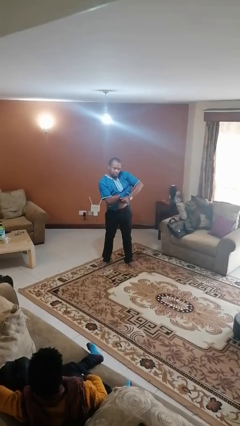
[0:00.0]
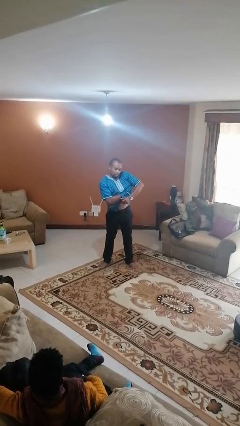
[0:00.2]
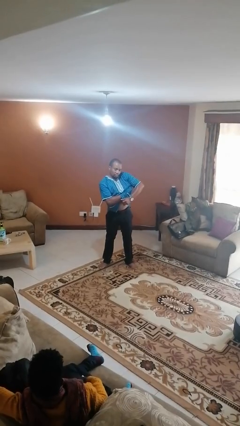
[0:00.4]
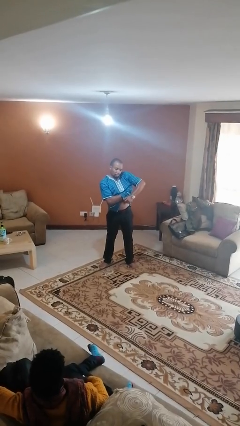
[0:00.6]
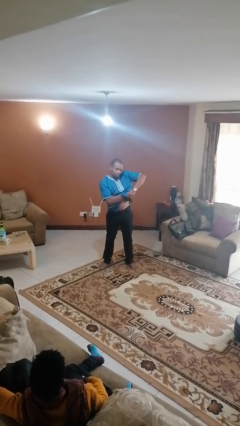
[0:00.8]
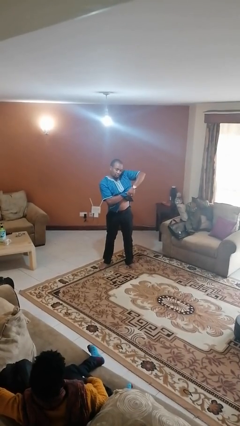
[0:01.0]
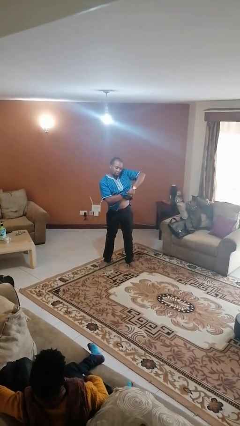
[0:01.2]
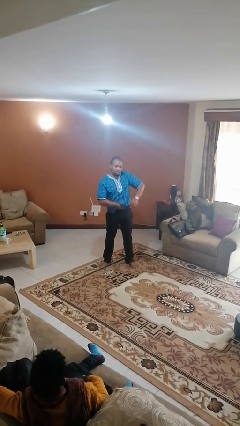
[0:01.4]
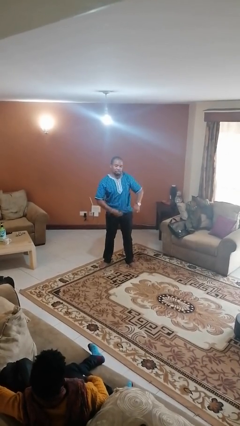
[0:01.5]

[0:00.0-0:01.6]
person applies deodorant

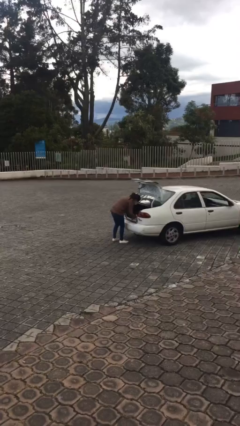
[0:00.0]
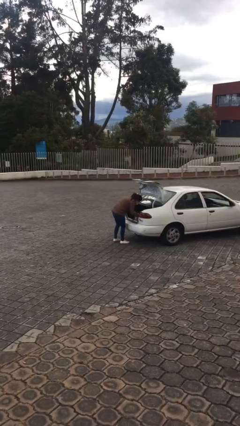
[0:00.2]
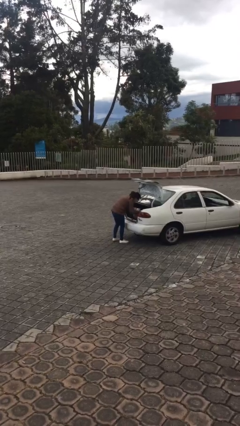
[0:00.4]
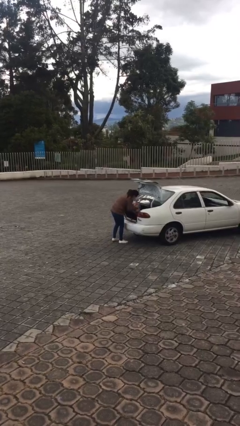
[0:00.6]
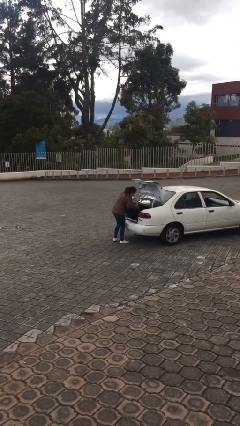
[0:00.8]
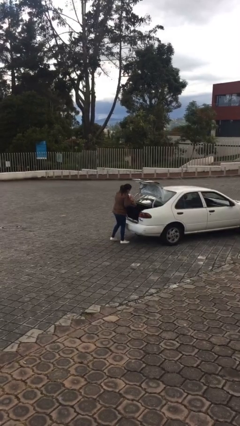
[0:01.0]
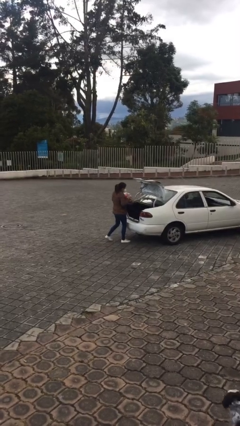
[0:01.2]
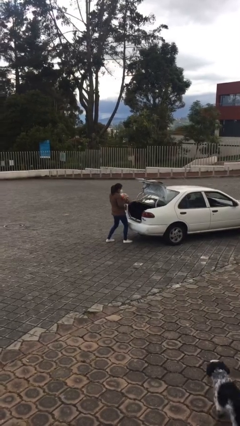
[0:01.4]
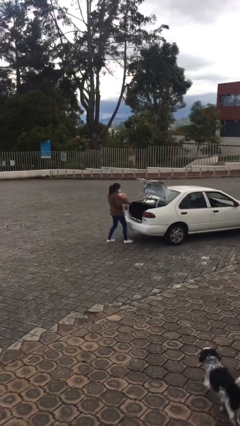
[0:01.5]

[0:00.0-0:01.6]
person unloads car

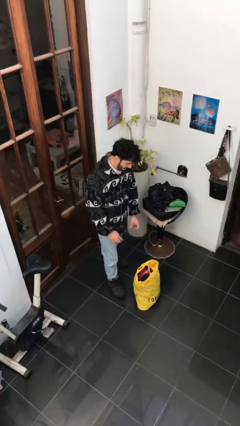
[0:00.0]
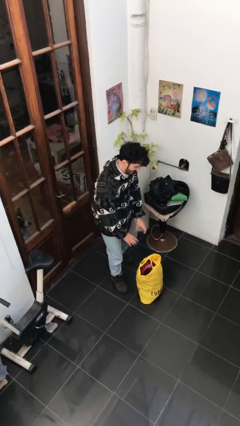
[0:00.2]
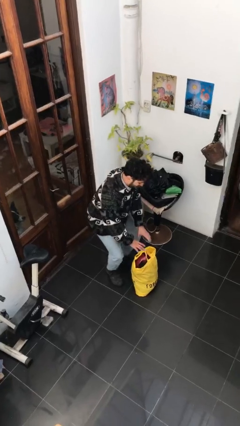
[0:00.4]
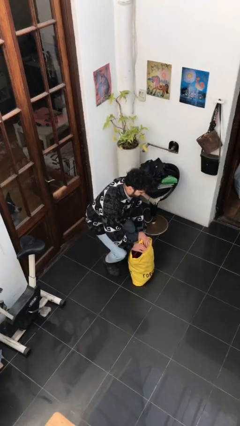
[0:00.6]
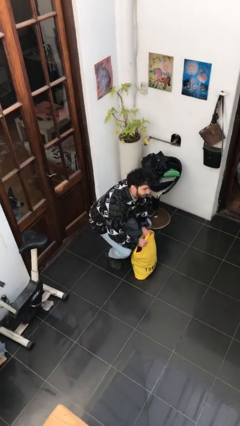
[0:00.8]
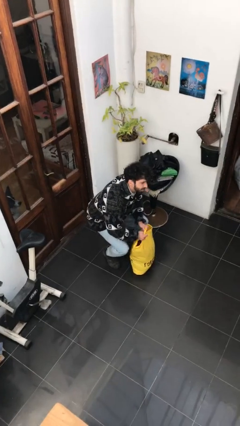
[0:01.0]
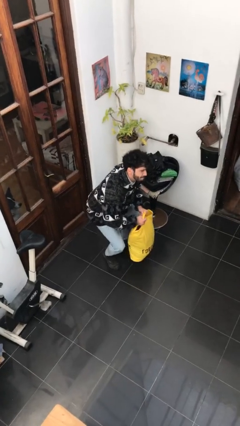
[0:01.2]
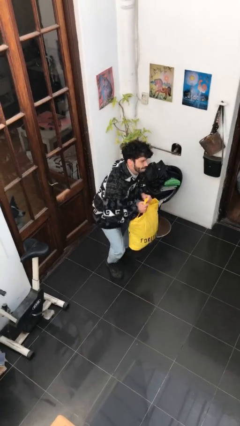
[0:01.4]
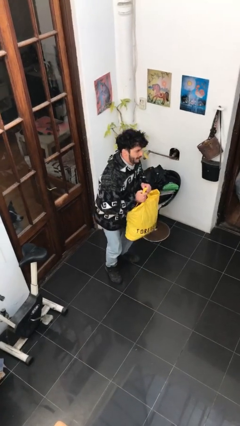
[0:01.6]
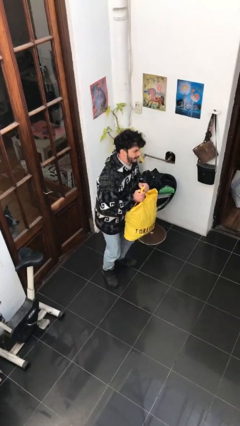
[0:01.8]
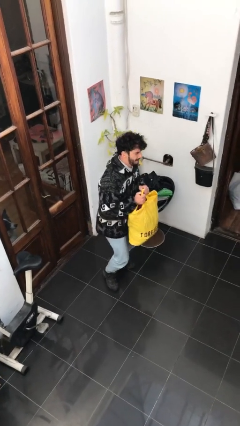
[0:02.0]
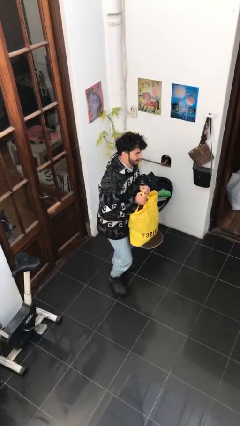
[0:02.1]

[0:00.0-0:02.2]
person picks up object from floor

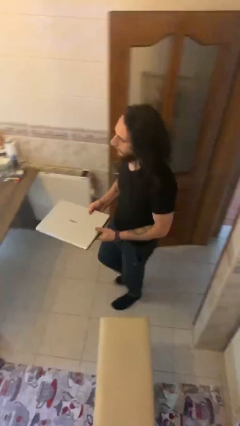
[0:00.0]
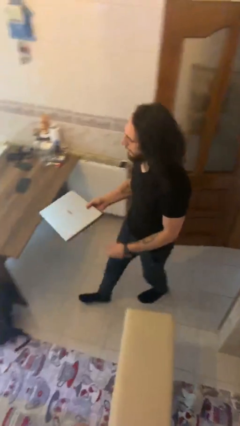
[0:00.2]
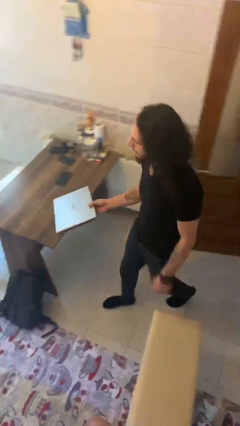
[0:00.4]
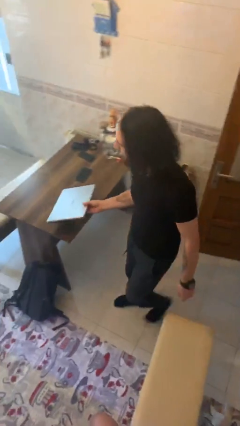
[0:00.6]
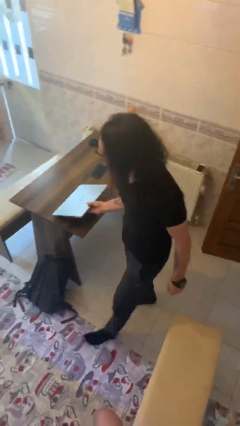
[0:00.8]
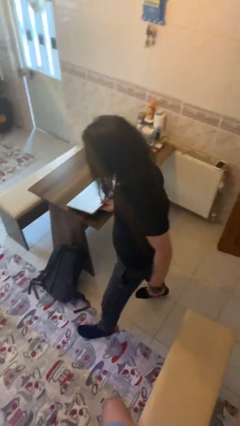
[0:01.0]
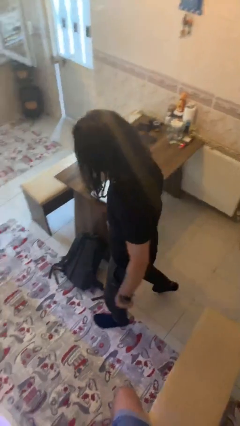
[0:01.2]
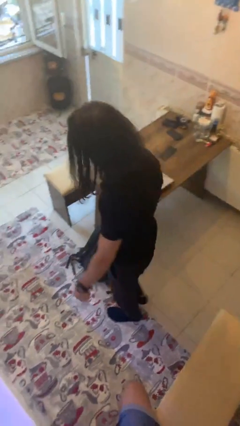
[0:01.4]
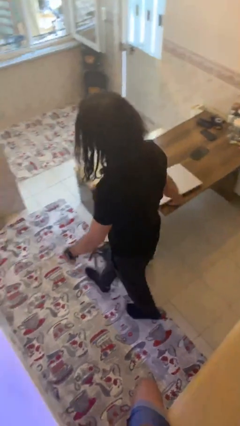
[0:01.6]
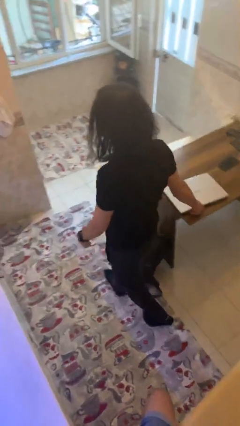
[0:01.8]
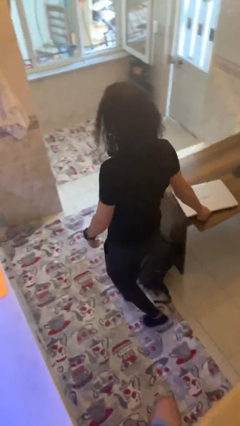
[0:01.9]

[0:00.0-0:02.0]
person puts down object on table

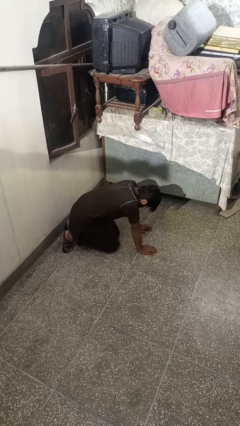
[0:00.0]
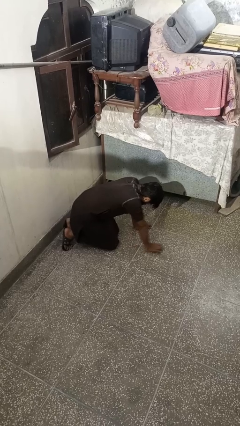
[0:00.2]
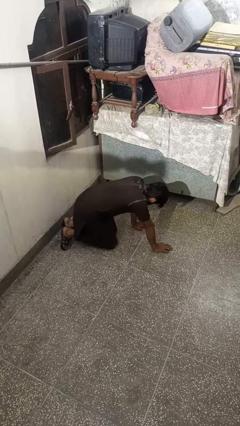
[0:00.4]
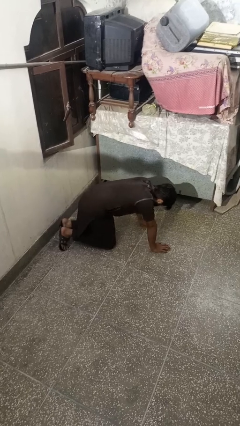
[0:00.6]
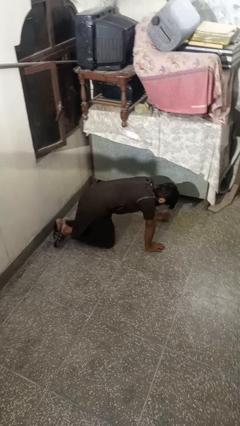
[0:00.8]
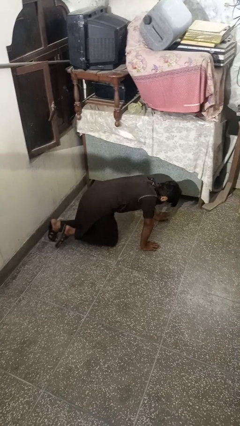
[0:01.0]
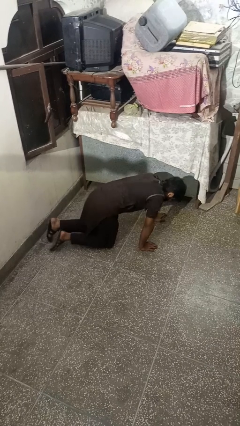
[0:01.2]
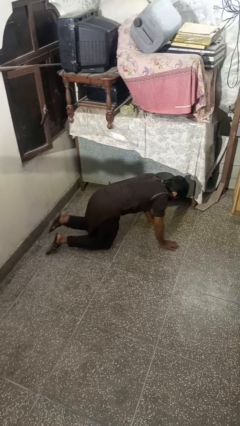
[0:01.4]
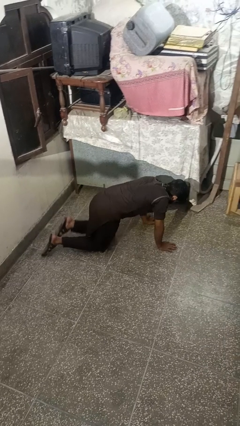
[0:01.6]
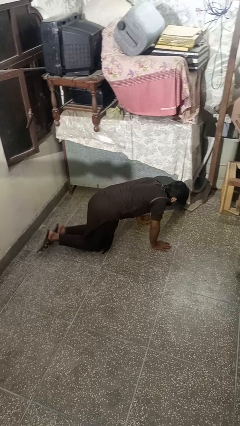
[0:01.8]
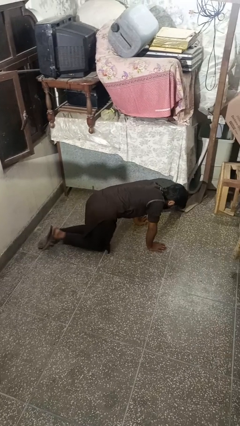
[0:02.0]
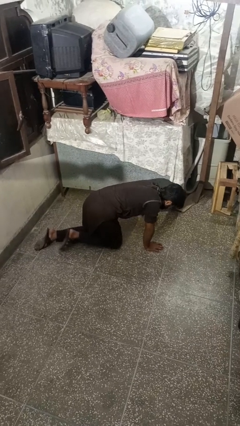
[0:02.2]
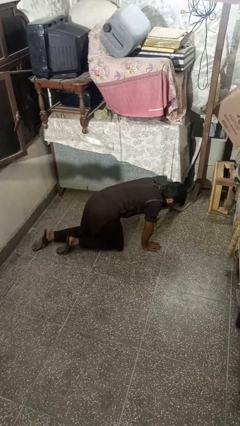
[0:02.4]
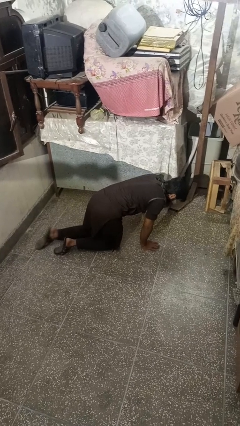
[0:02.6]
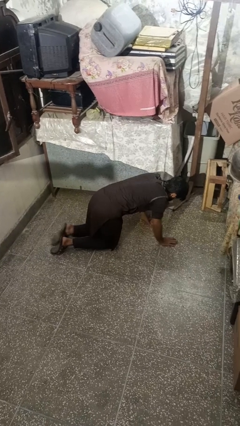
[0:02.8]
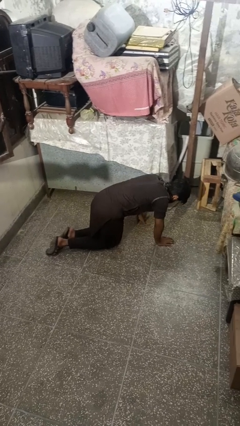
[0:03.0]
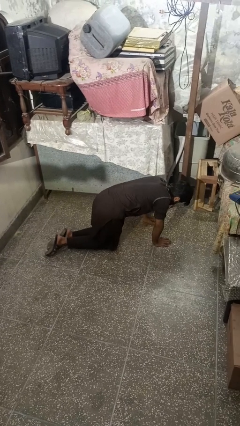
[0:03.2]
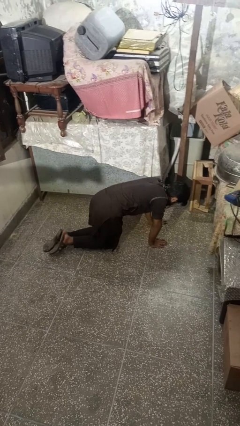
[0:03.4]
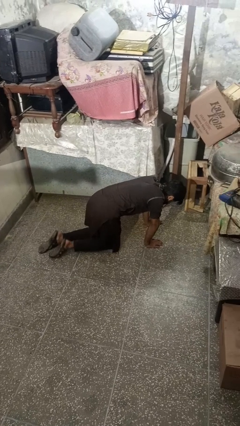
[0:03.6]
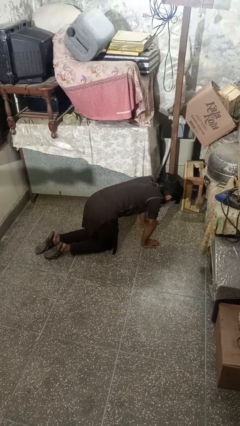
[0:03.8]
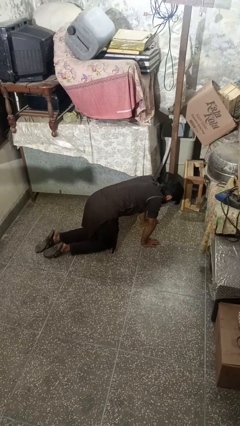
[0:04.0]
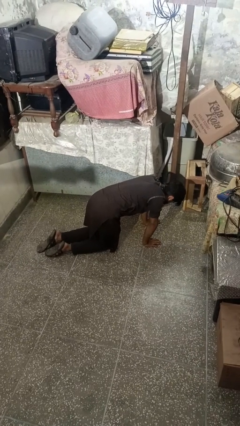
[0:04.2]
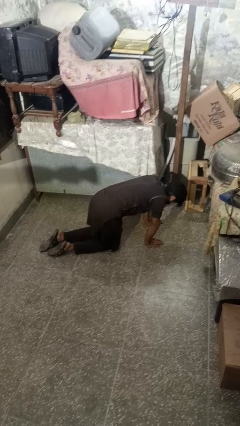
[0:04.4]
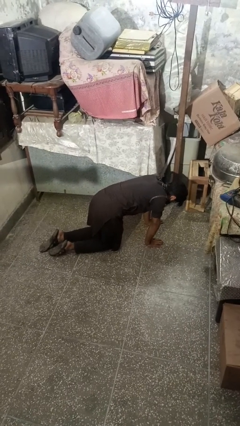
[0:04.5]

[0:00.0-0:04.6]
person crawls

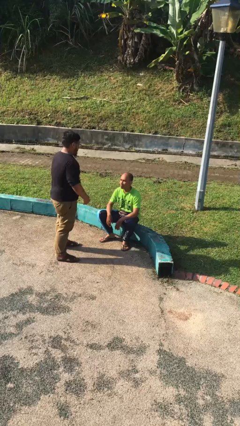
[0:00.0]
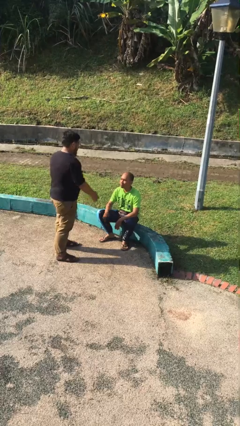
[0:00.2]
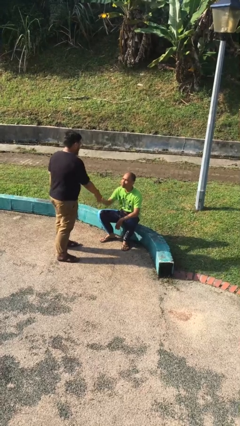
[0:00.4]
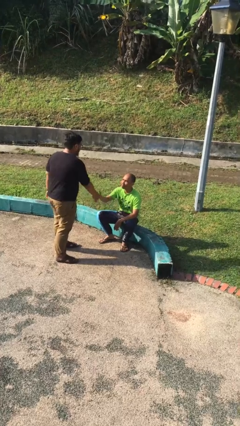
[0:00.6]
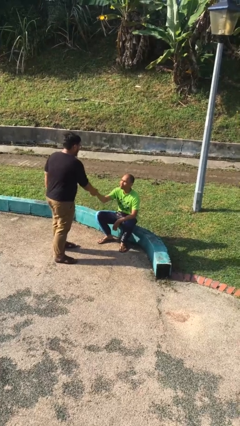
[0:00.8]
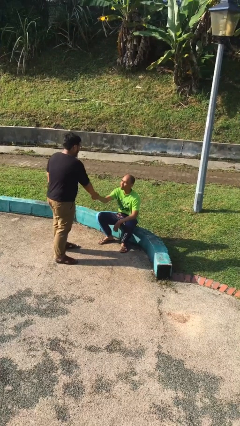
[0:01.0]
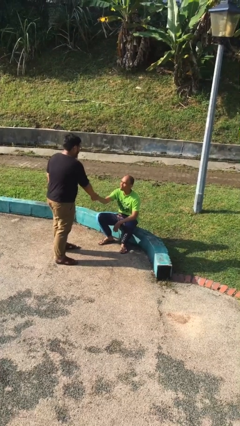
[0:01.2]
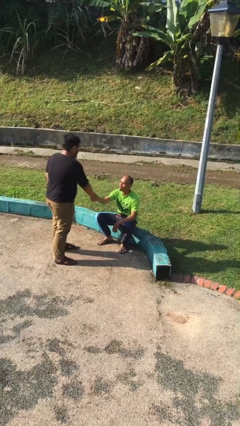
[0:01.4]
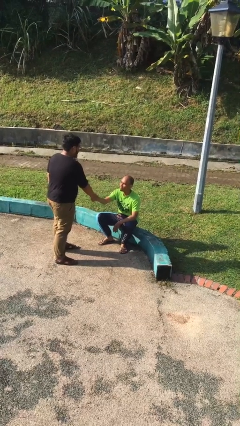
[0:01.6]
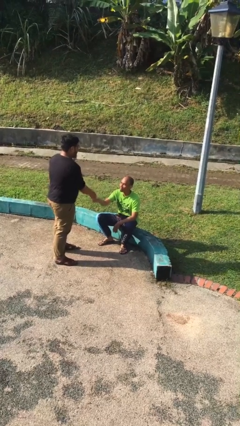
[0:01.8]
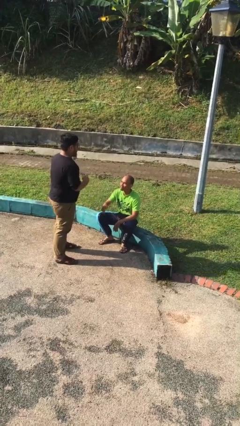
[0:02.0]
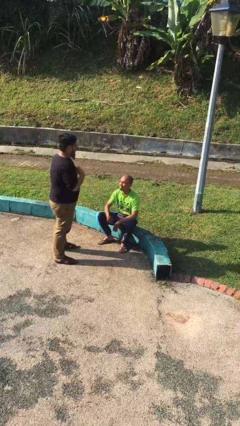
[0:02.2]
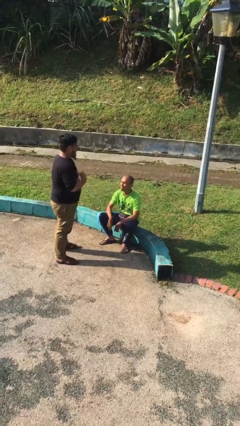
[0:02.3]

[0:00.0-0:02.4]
person shakes hand

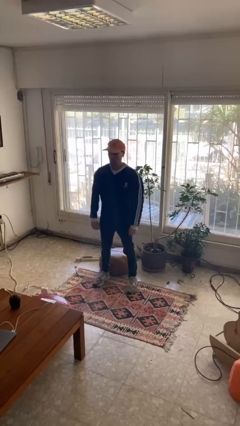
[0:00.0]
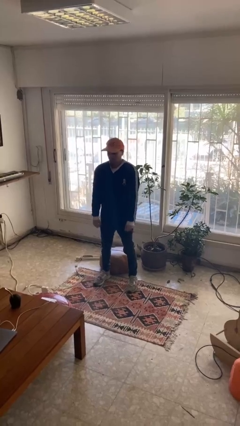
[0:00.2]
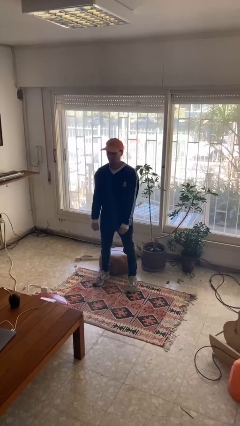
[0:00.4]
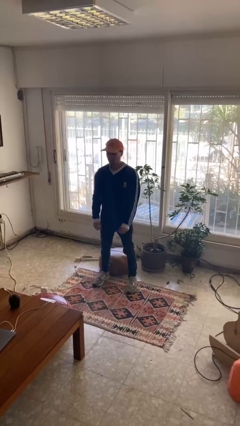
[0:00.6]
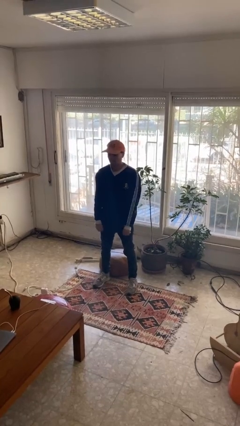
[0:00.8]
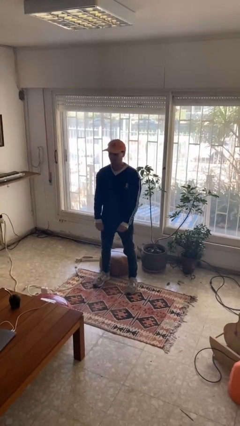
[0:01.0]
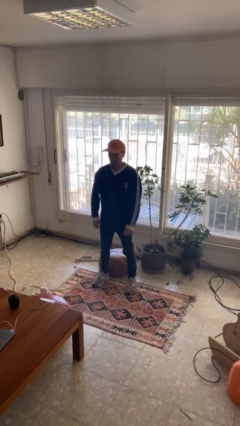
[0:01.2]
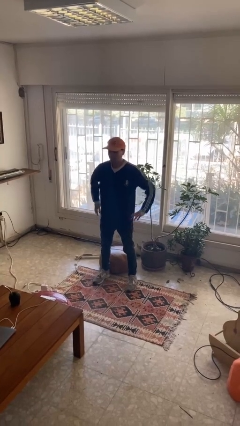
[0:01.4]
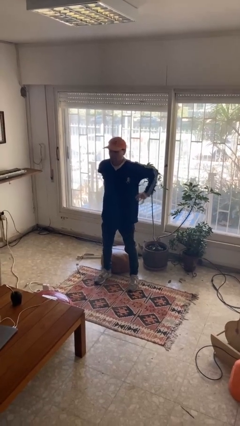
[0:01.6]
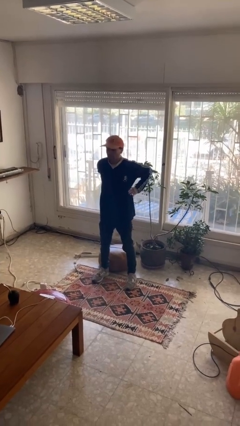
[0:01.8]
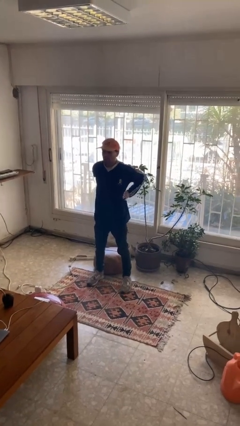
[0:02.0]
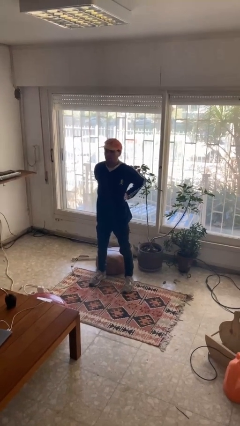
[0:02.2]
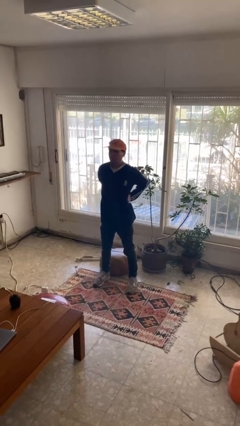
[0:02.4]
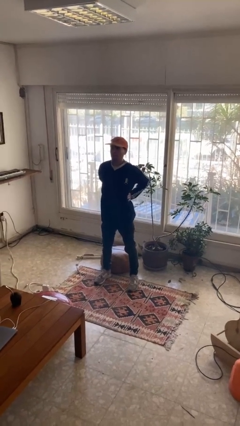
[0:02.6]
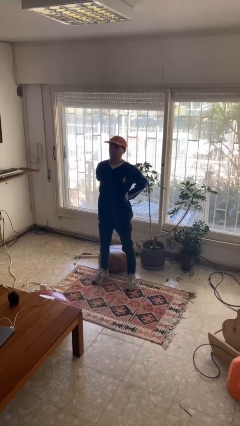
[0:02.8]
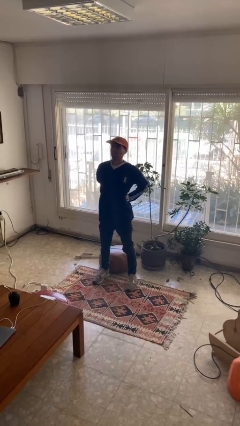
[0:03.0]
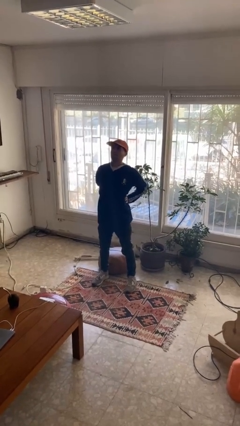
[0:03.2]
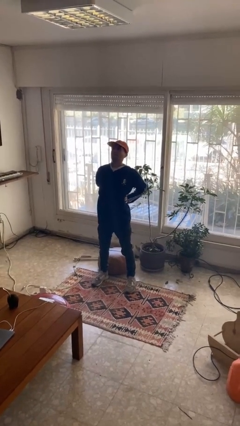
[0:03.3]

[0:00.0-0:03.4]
person stretches back
